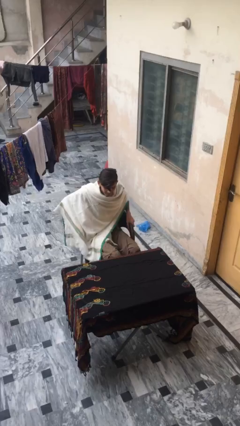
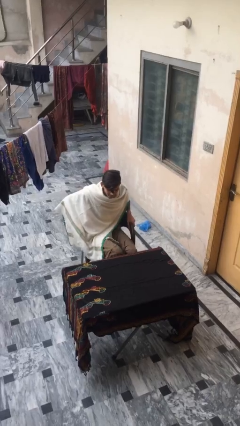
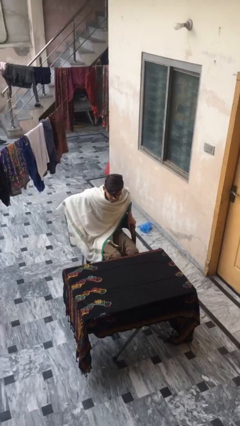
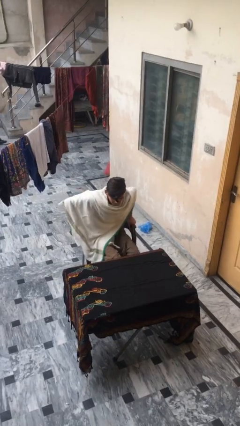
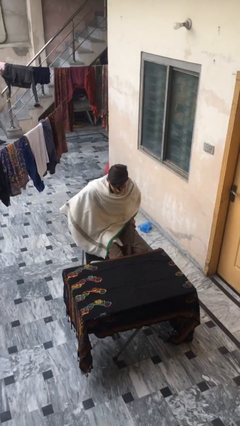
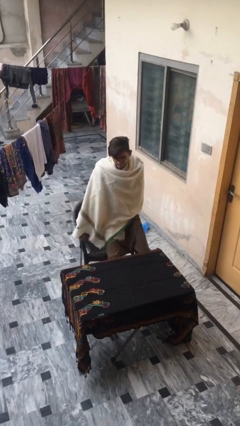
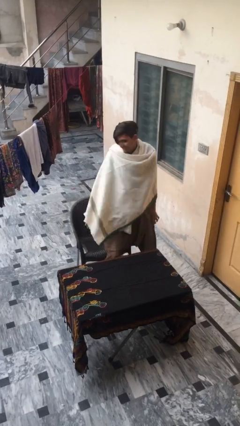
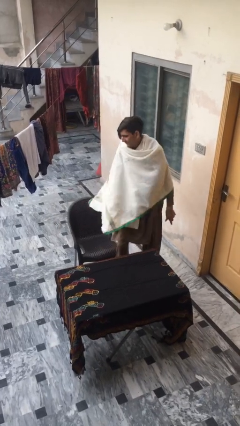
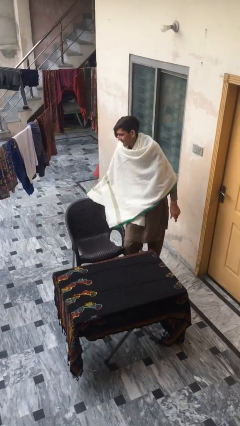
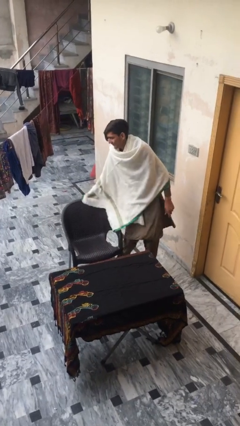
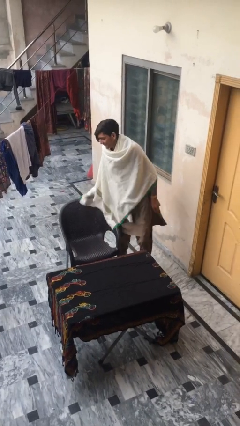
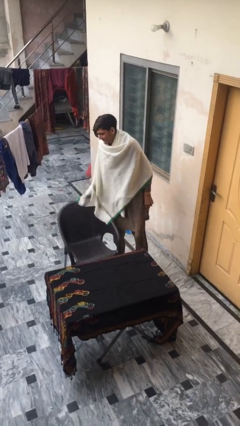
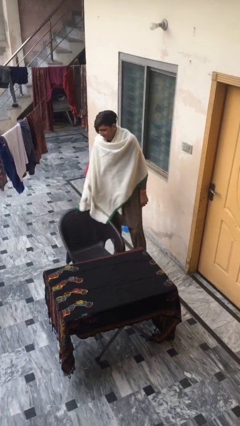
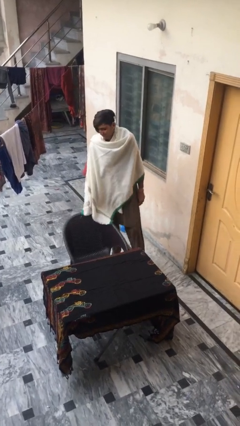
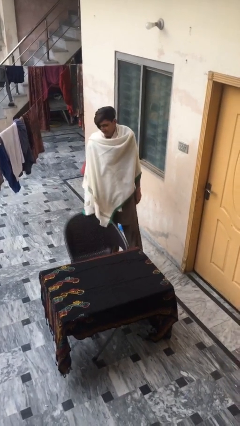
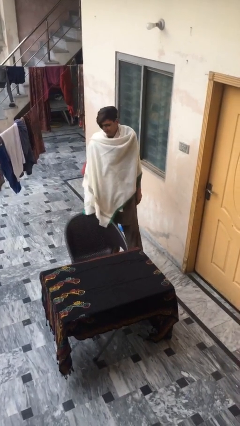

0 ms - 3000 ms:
person stands up

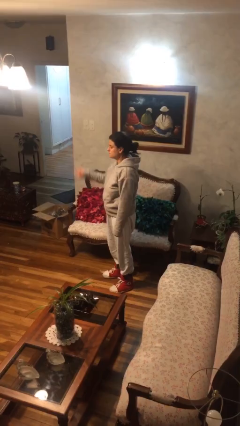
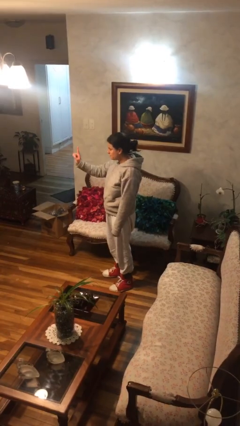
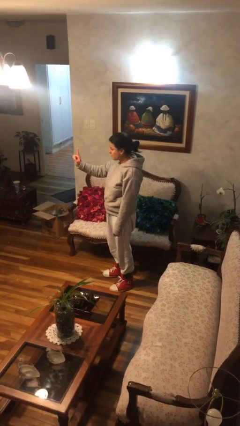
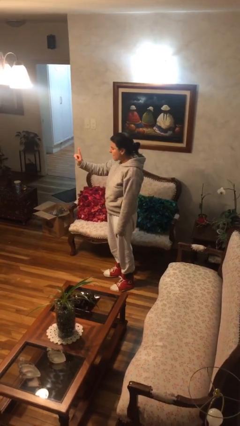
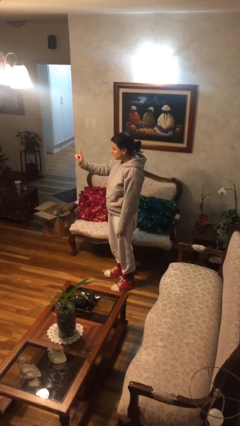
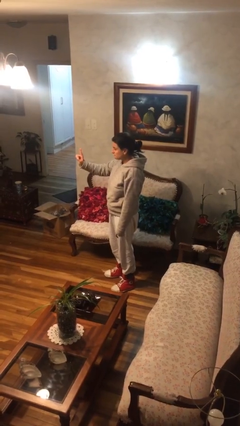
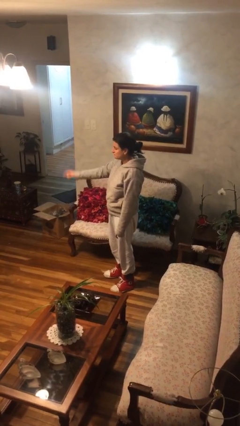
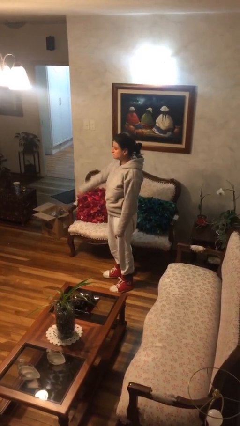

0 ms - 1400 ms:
person gestures number one

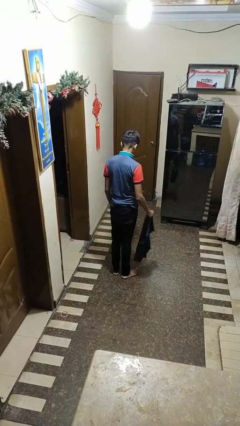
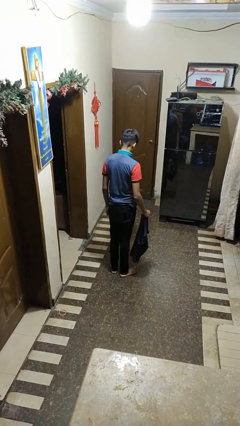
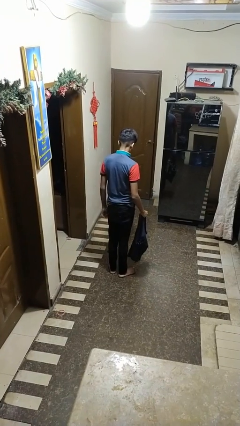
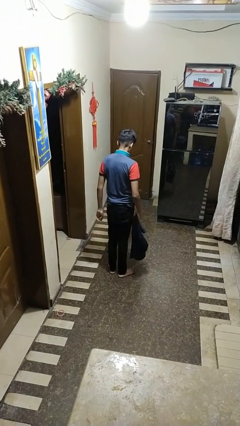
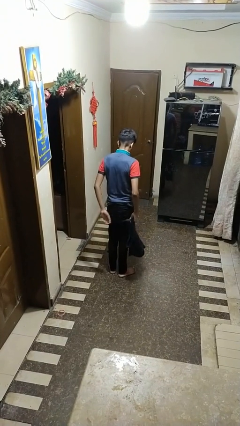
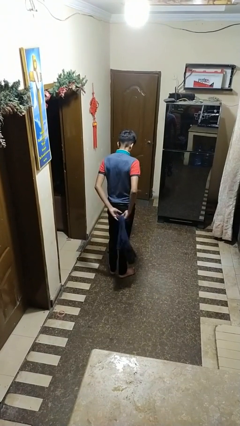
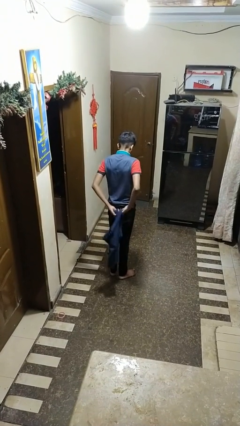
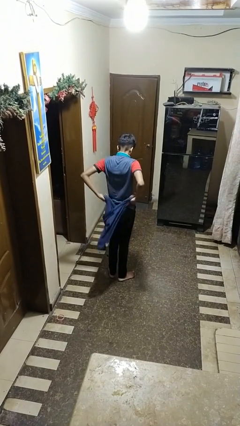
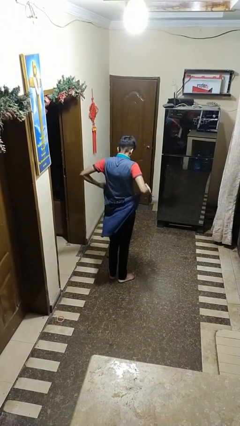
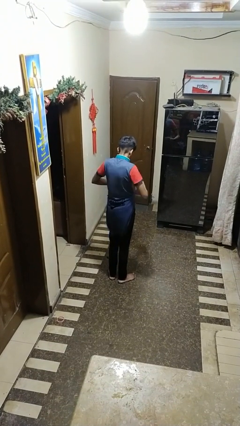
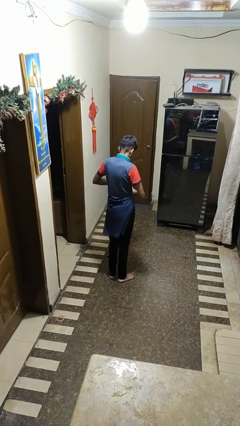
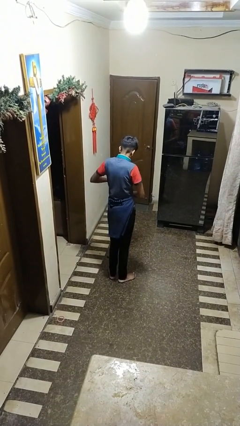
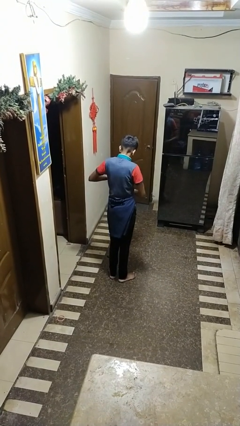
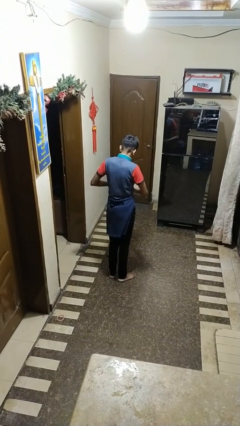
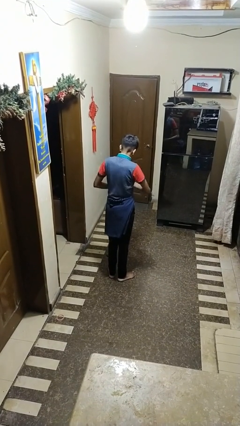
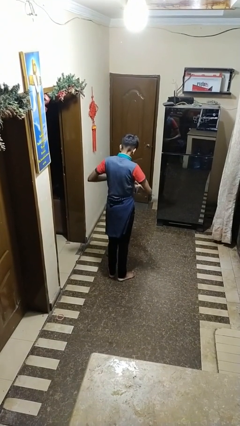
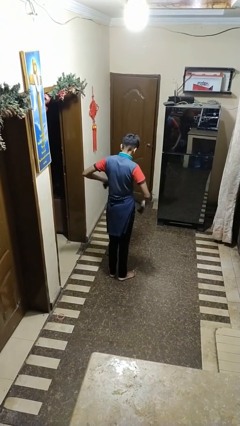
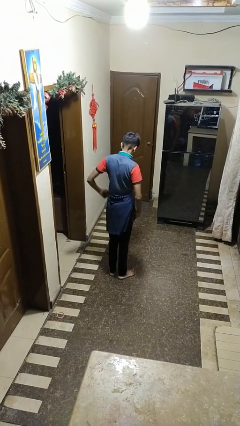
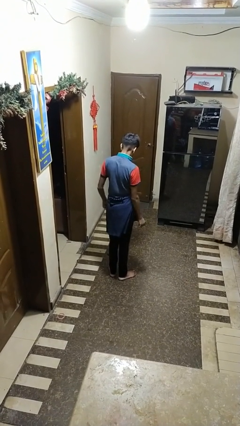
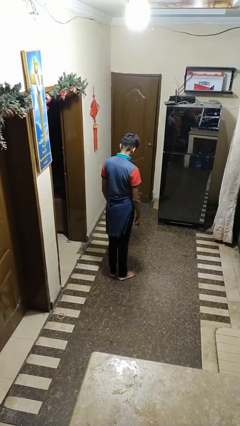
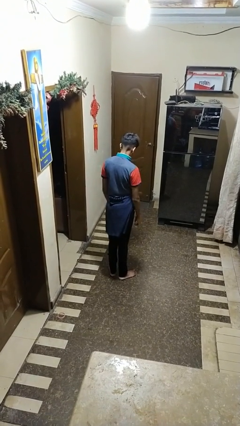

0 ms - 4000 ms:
person ties jacket around waist

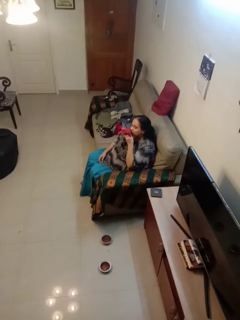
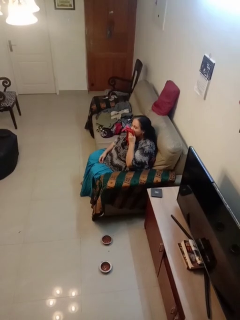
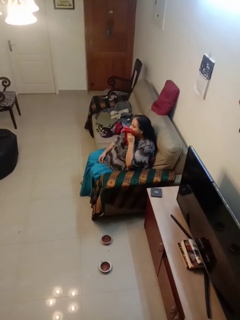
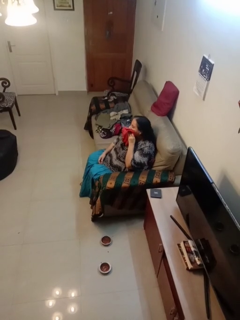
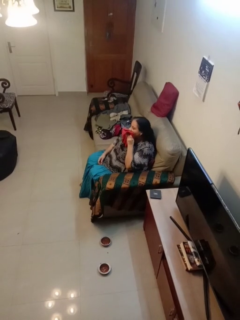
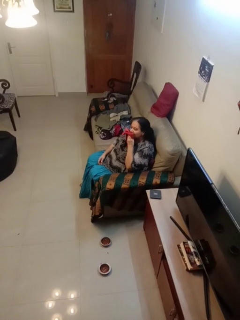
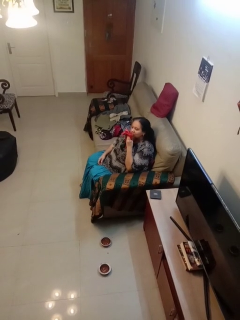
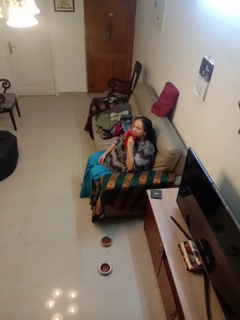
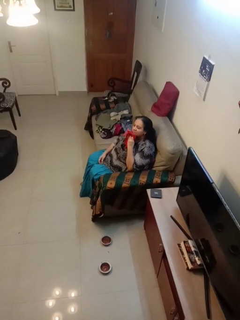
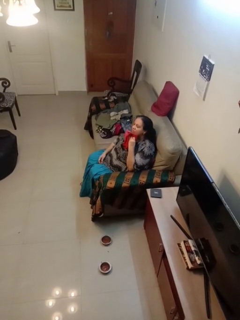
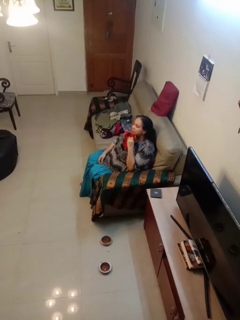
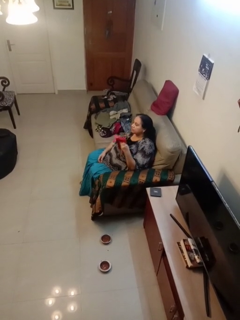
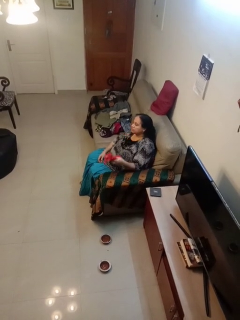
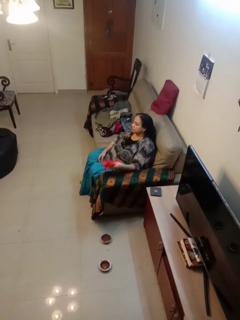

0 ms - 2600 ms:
person wipes mouth with napkin

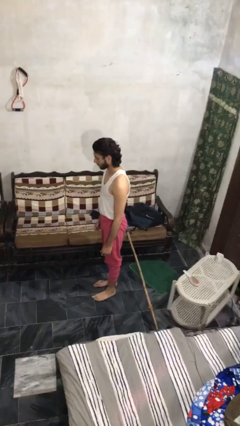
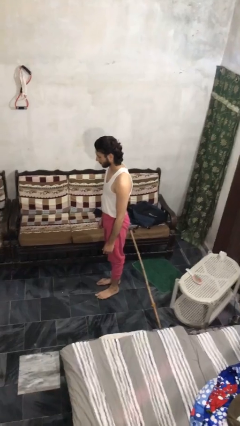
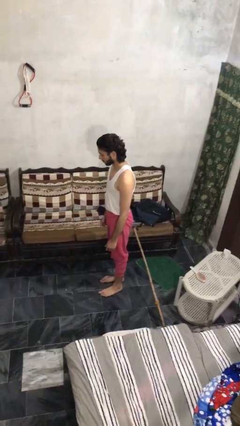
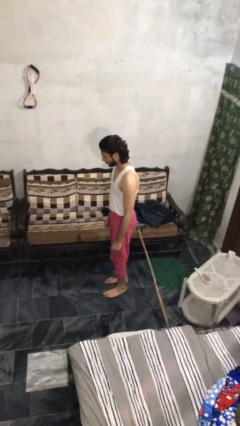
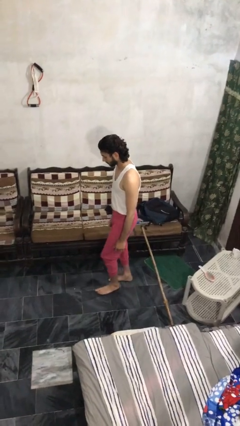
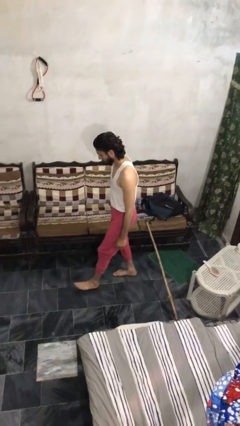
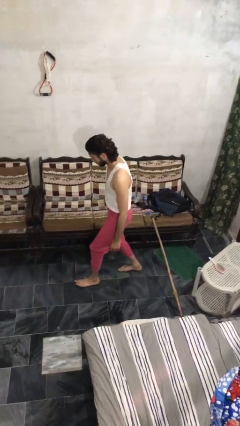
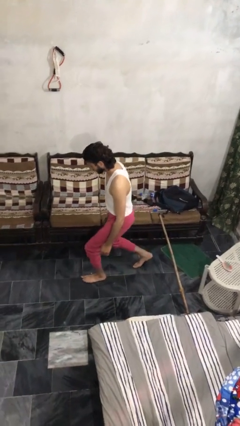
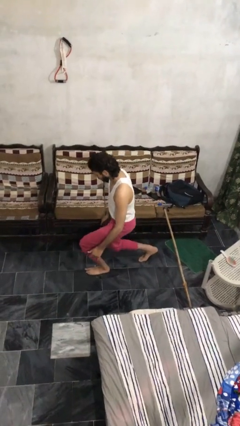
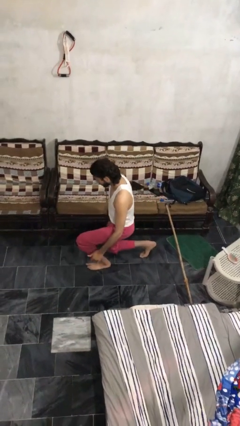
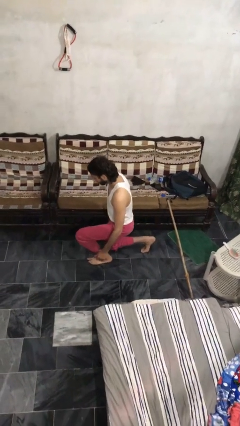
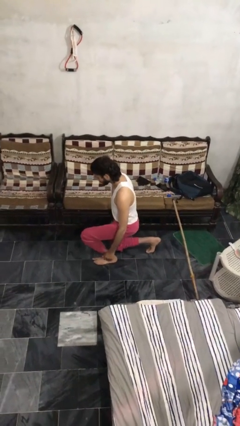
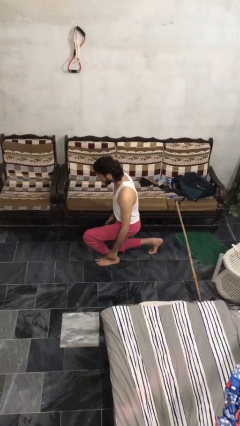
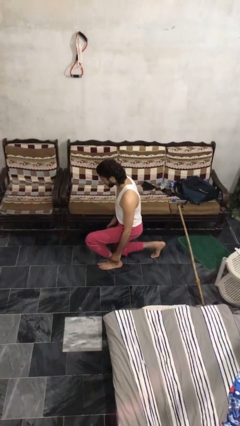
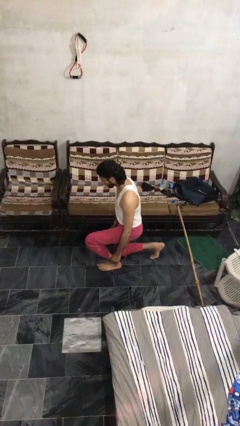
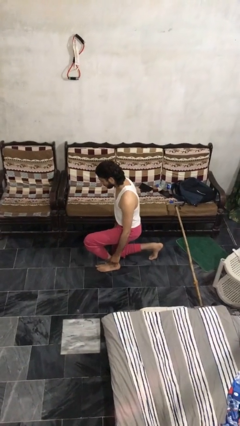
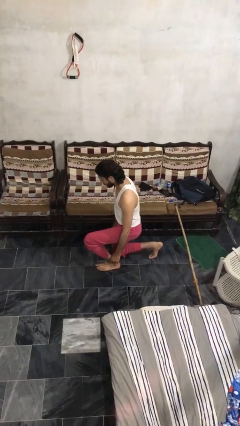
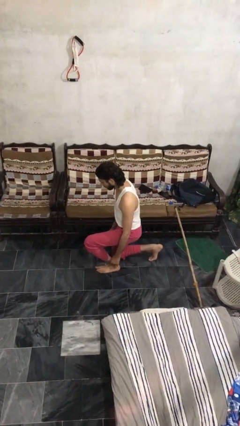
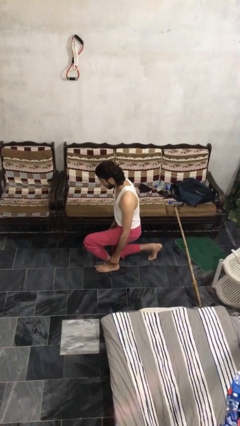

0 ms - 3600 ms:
person kneels

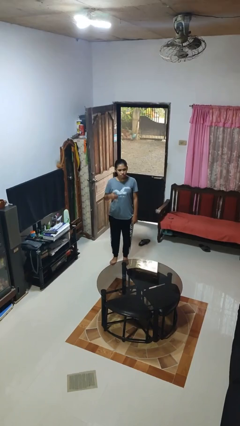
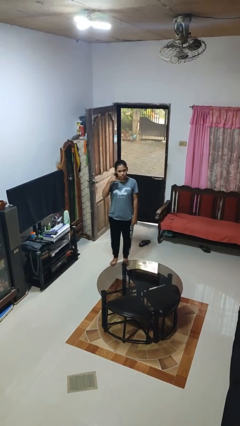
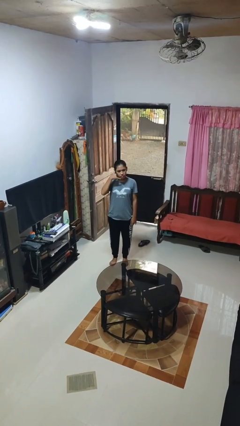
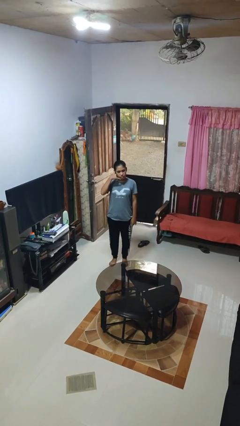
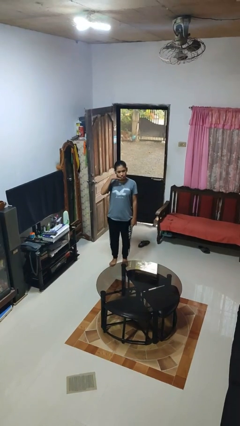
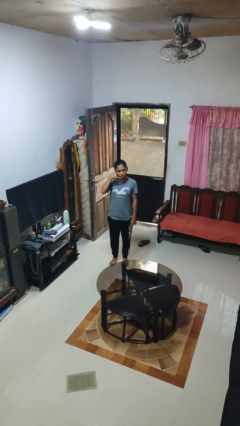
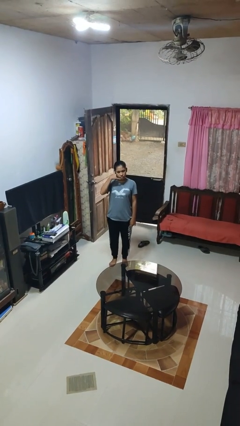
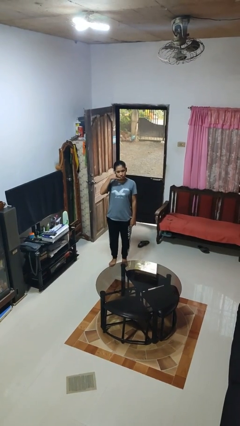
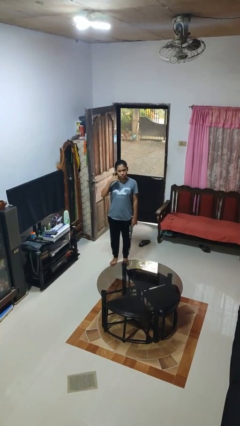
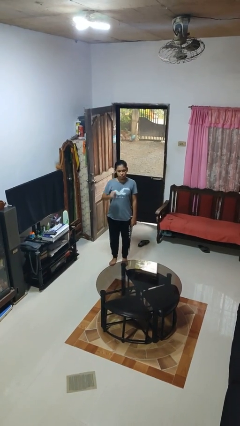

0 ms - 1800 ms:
person gestures call me

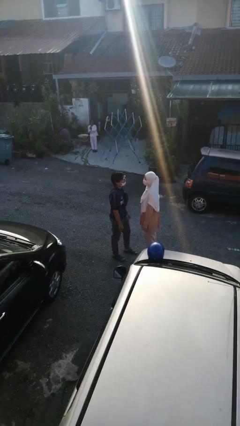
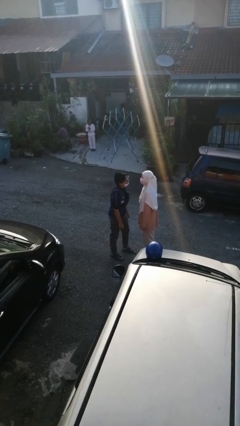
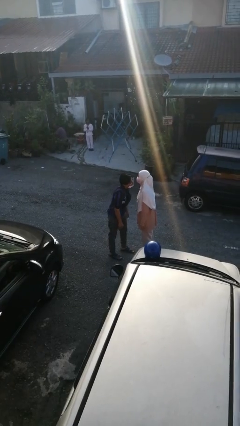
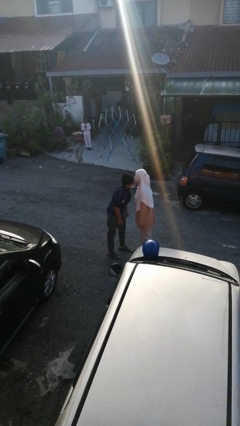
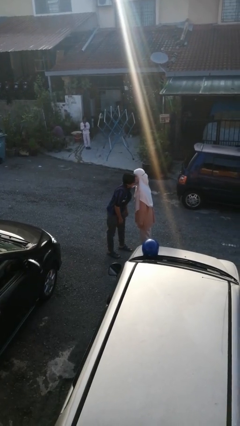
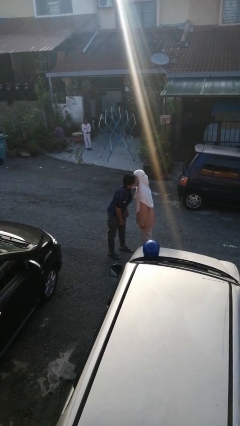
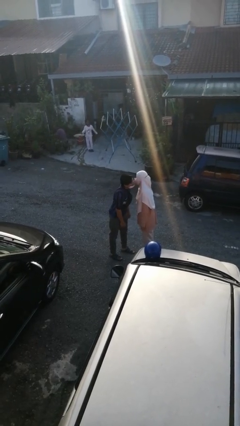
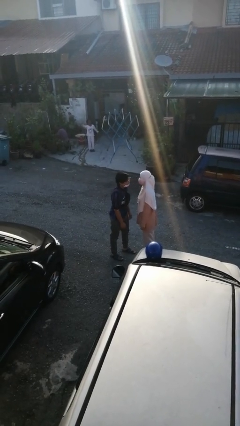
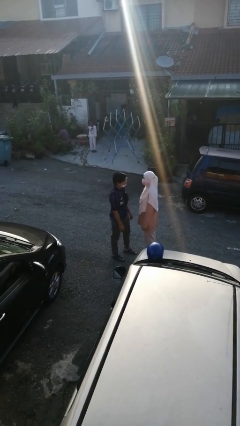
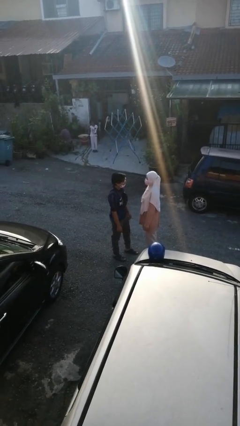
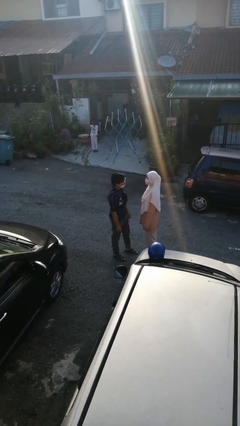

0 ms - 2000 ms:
person kisses cheek of person
